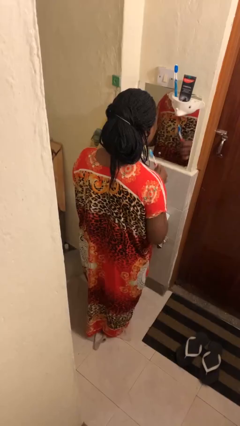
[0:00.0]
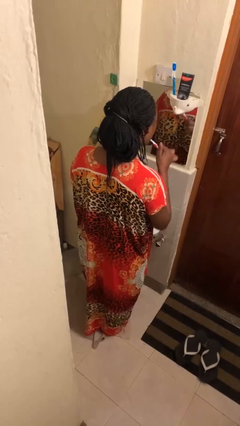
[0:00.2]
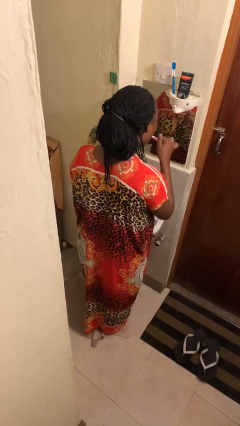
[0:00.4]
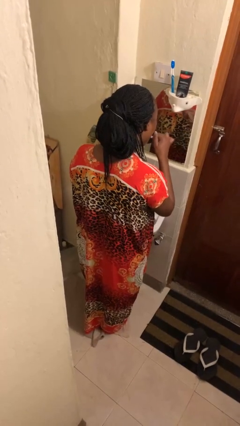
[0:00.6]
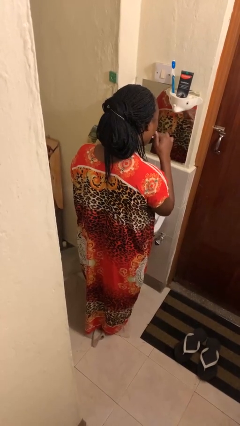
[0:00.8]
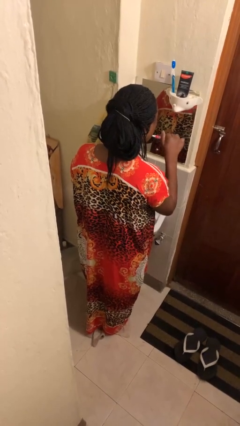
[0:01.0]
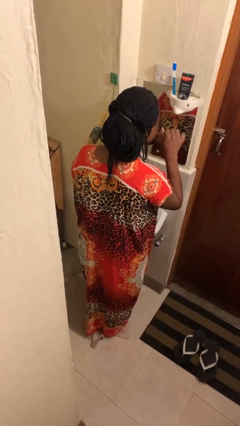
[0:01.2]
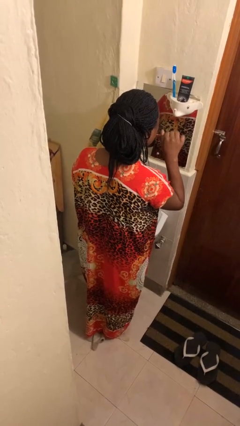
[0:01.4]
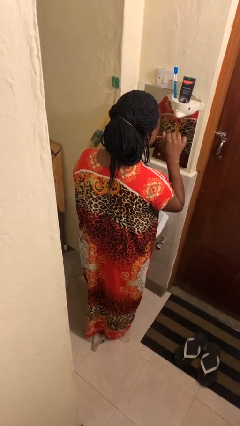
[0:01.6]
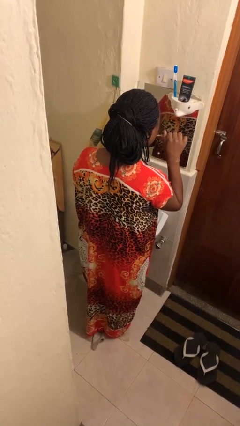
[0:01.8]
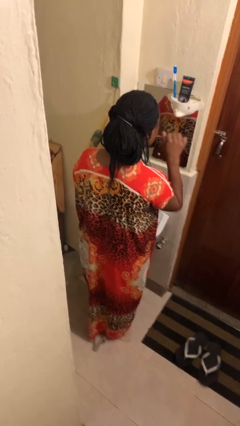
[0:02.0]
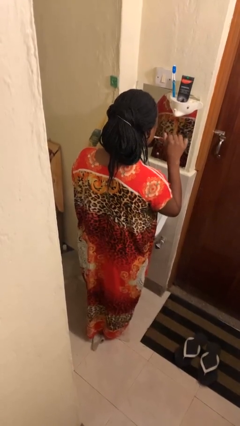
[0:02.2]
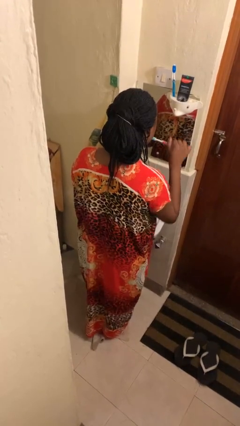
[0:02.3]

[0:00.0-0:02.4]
person brushes teeth

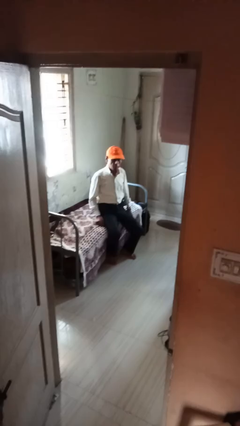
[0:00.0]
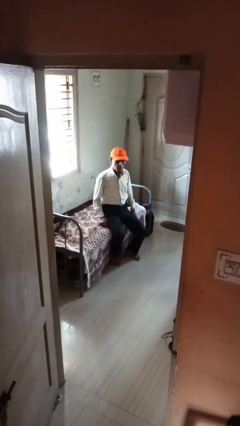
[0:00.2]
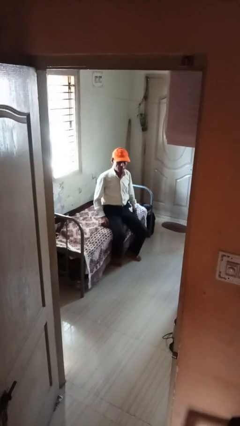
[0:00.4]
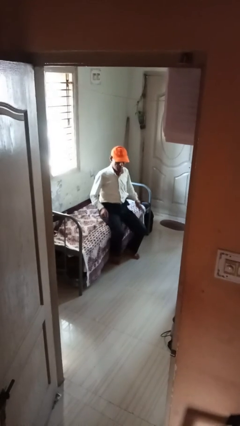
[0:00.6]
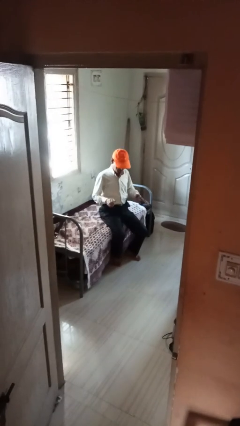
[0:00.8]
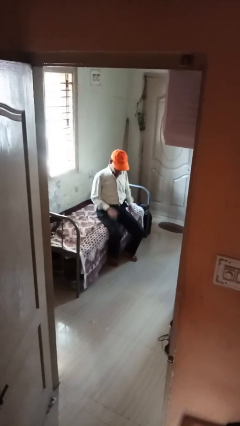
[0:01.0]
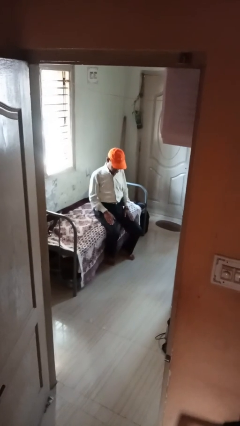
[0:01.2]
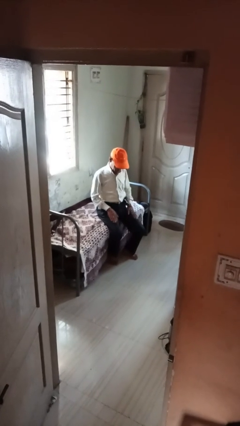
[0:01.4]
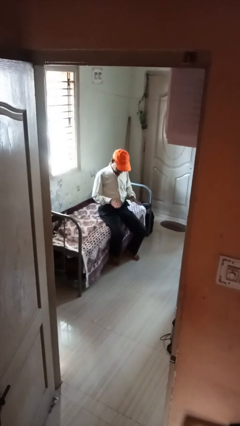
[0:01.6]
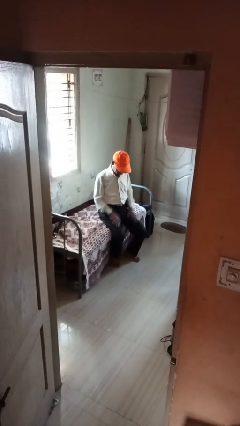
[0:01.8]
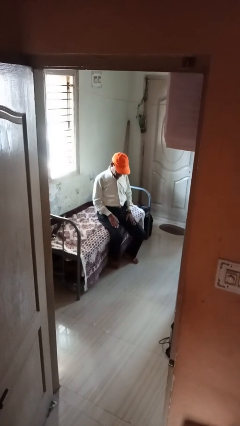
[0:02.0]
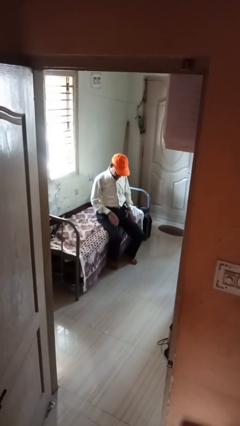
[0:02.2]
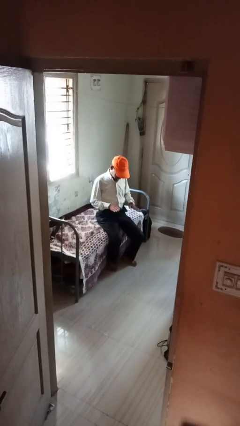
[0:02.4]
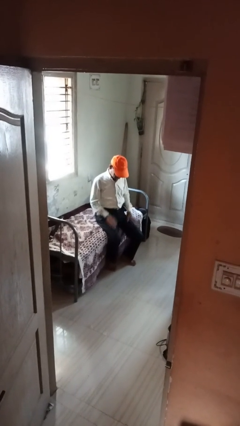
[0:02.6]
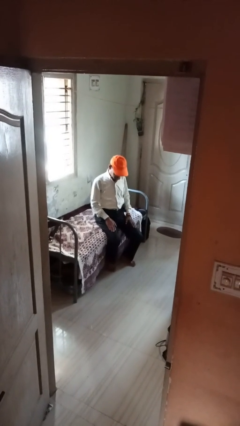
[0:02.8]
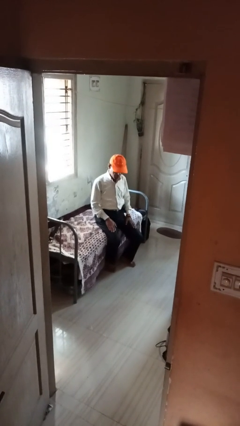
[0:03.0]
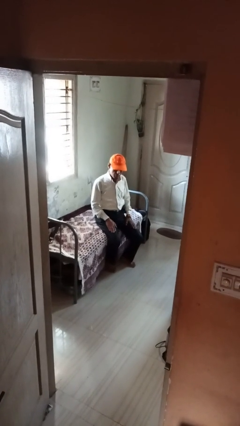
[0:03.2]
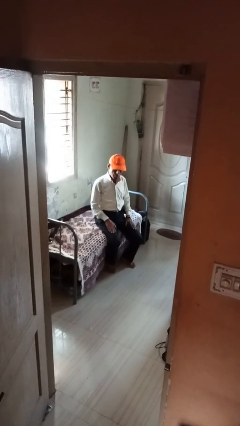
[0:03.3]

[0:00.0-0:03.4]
person slaps hands on thighs

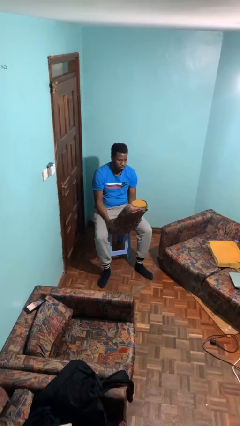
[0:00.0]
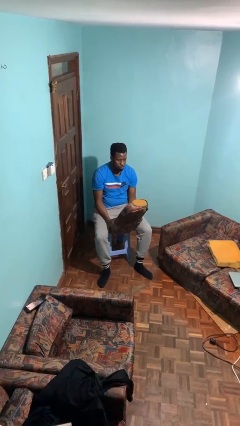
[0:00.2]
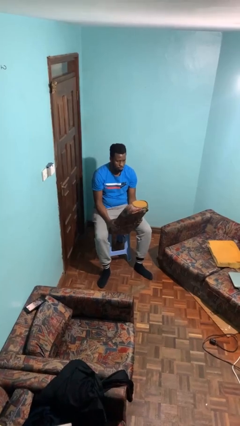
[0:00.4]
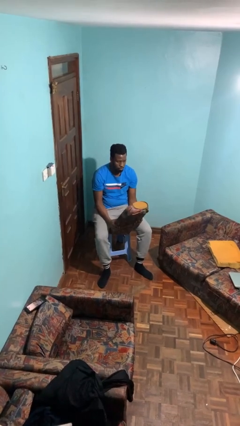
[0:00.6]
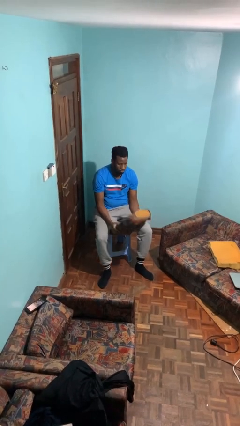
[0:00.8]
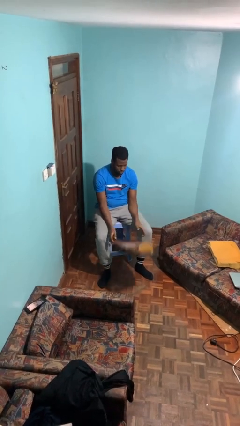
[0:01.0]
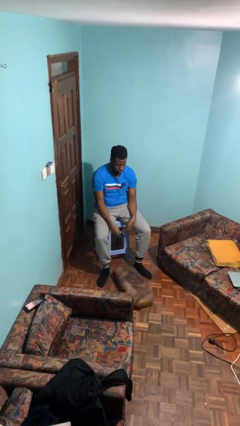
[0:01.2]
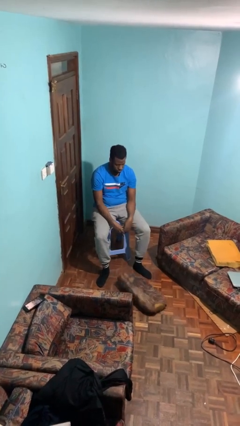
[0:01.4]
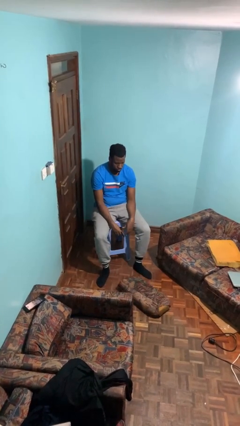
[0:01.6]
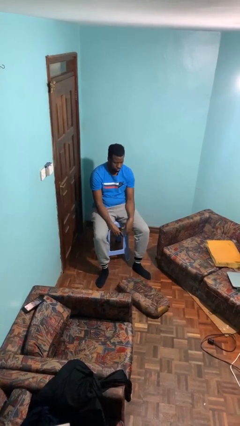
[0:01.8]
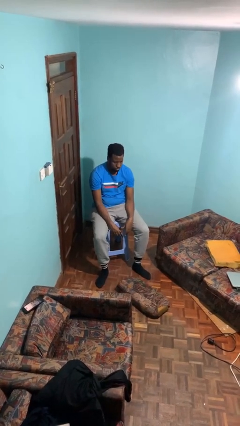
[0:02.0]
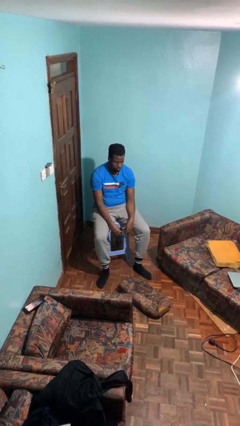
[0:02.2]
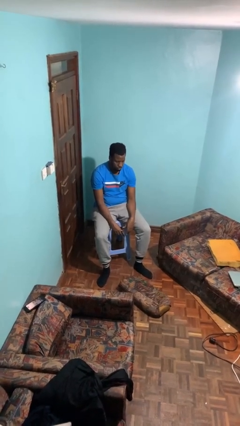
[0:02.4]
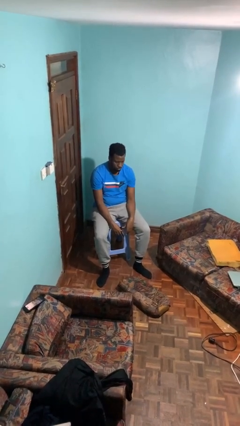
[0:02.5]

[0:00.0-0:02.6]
person drops object

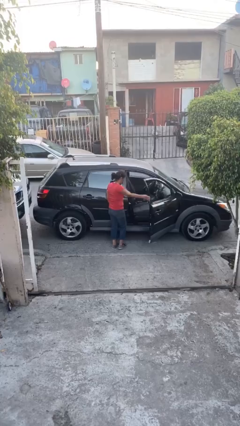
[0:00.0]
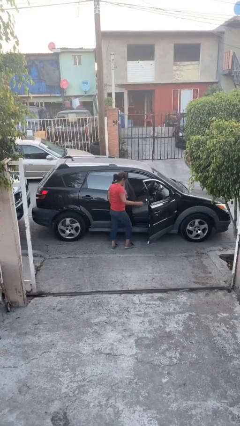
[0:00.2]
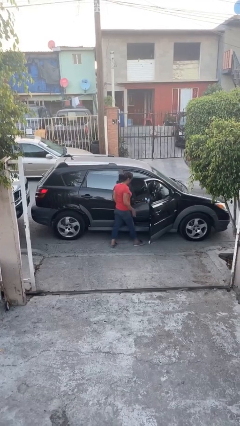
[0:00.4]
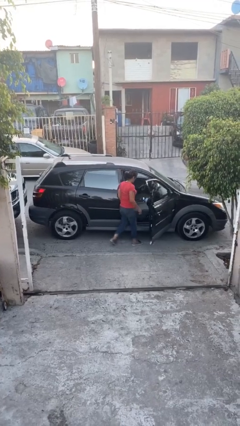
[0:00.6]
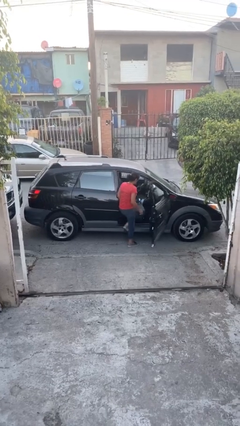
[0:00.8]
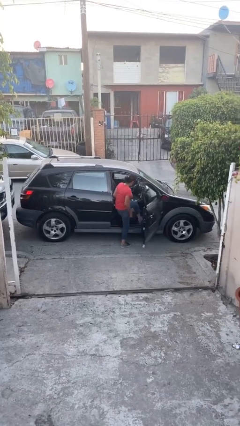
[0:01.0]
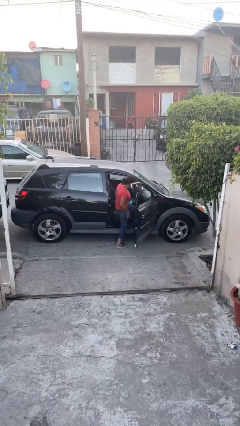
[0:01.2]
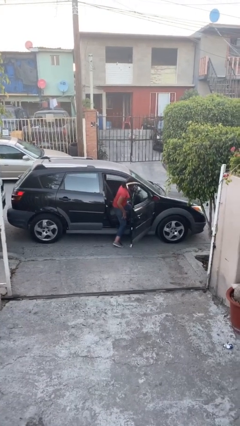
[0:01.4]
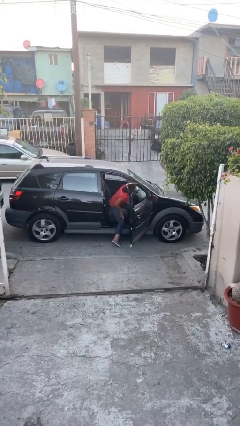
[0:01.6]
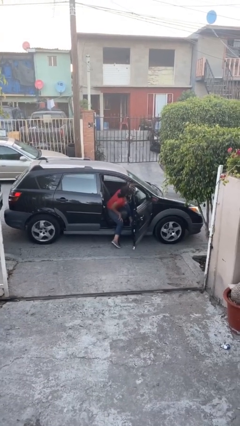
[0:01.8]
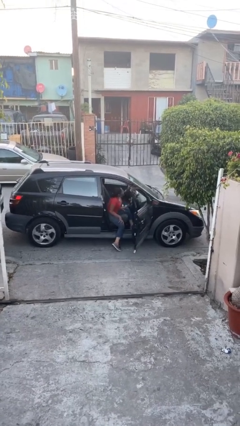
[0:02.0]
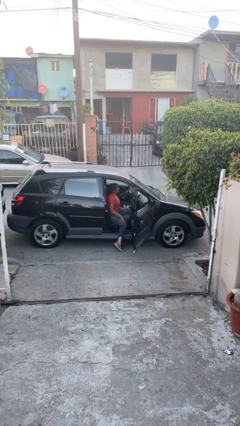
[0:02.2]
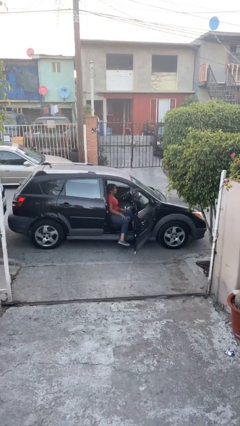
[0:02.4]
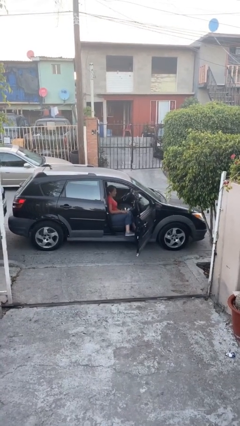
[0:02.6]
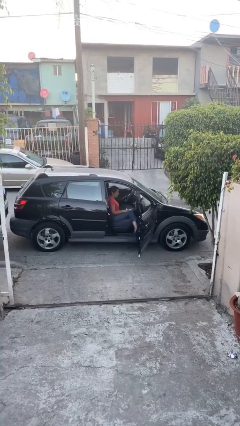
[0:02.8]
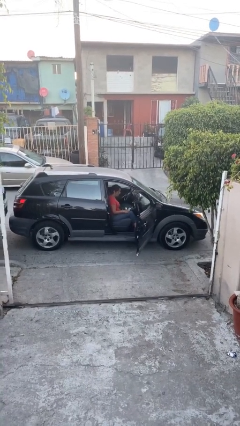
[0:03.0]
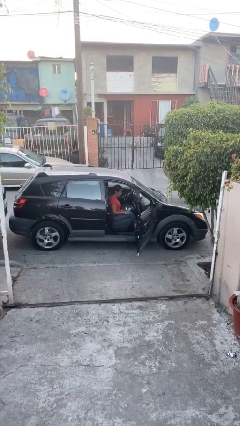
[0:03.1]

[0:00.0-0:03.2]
person enters car

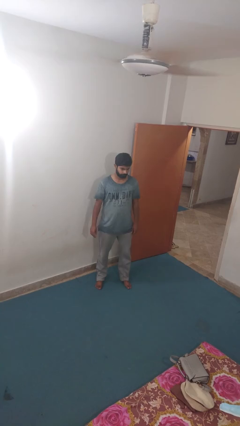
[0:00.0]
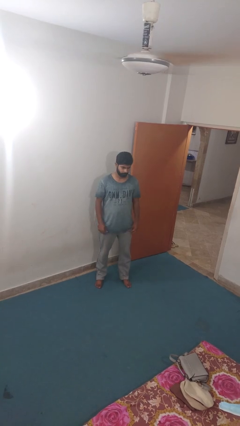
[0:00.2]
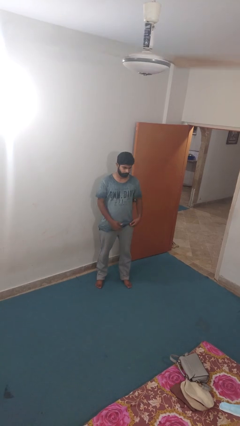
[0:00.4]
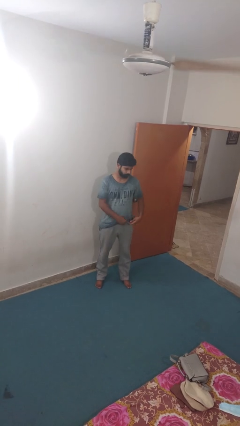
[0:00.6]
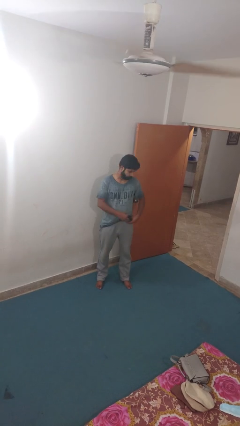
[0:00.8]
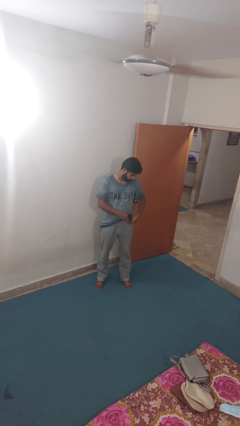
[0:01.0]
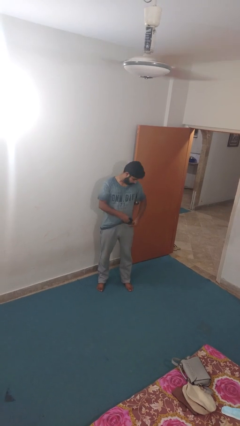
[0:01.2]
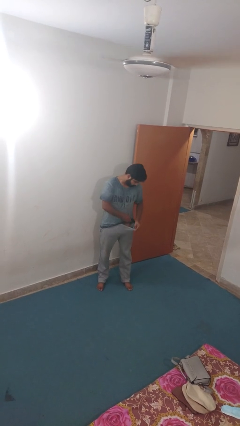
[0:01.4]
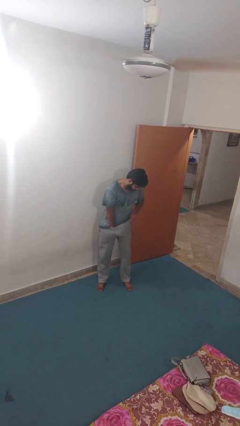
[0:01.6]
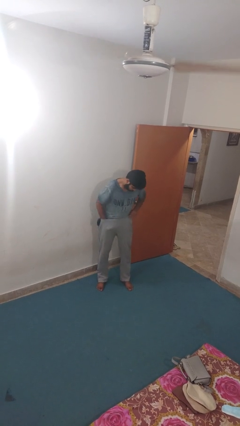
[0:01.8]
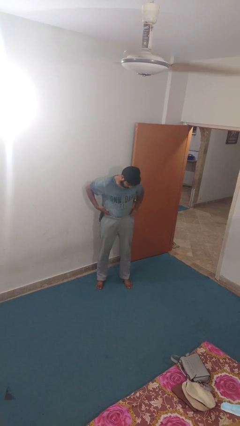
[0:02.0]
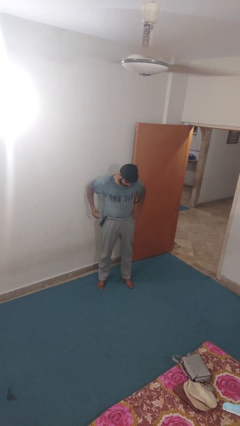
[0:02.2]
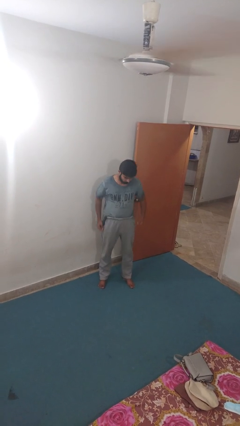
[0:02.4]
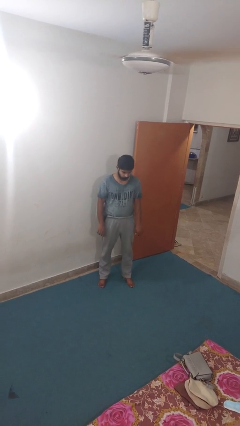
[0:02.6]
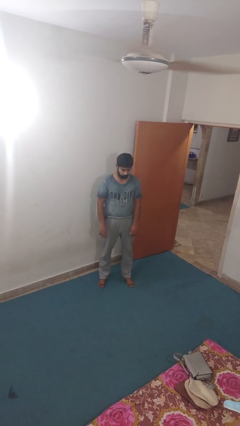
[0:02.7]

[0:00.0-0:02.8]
person tucks in shirt

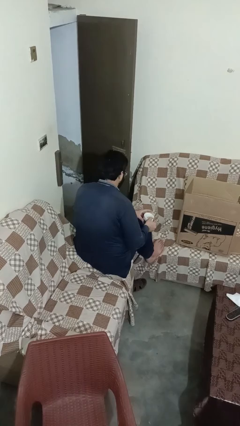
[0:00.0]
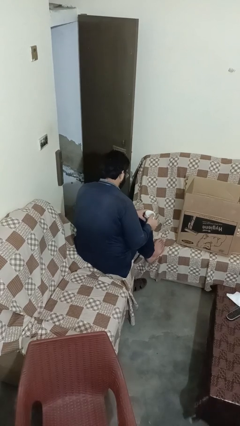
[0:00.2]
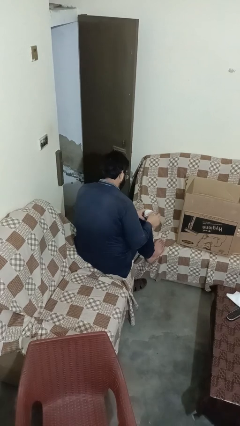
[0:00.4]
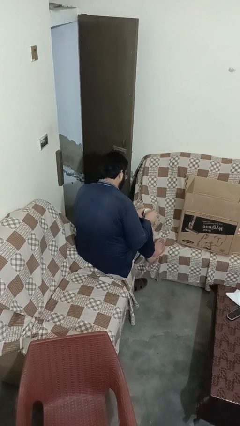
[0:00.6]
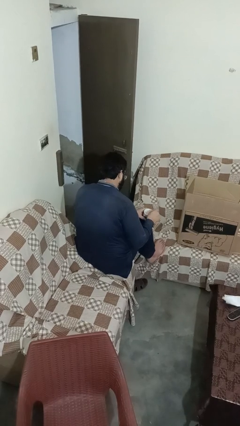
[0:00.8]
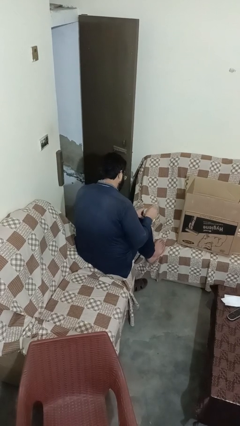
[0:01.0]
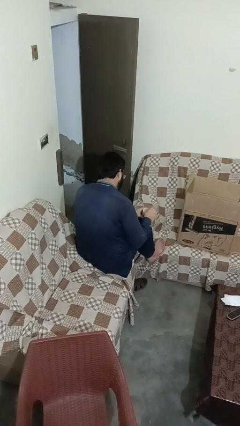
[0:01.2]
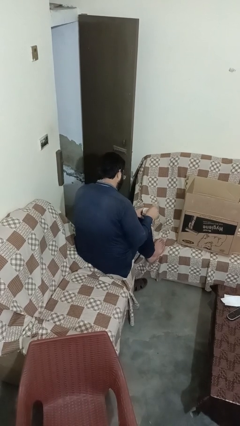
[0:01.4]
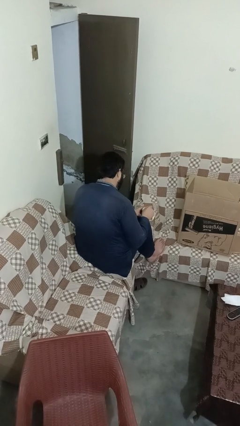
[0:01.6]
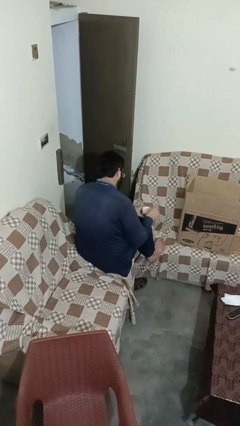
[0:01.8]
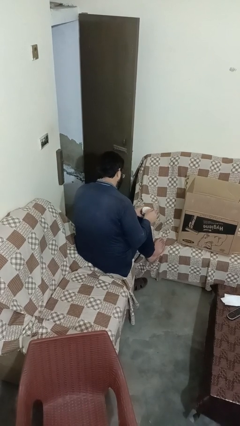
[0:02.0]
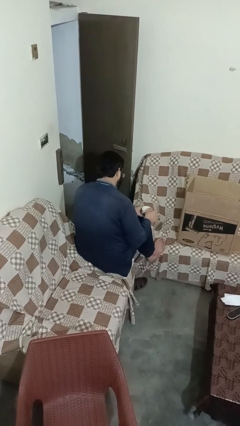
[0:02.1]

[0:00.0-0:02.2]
person stirs mug

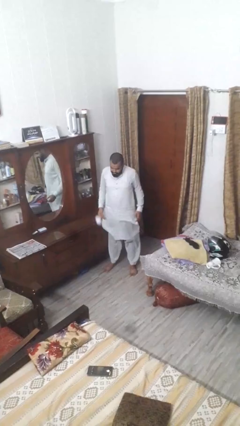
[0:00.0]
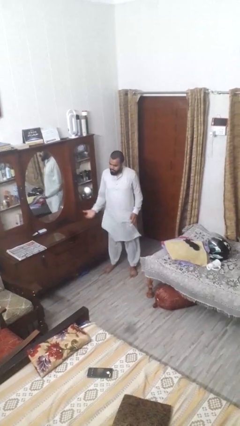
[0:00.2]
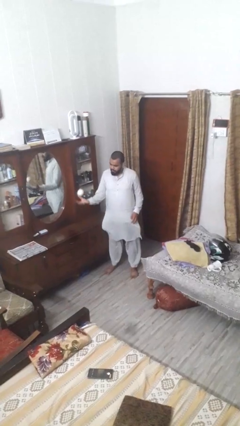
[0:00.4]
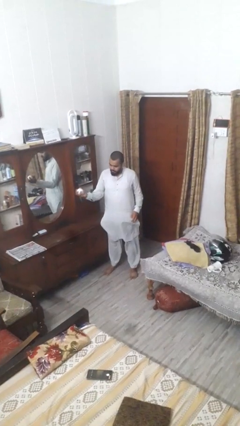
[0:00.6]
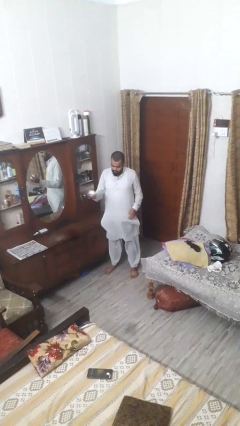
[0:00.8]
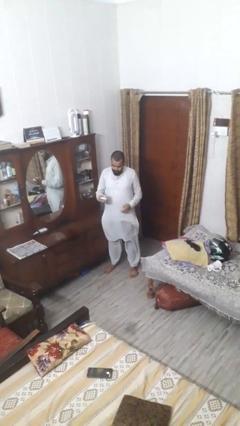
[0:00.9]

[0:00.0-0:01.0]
person bounces ball on floor
